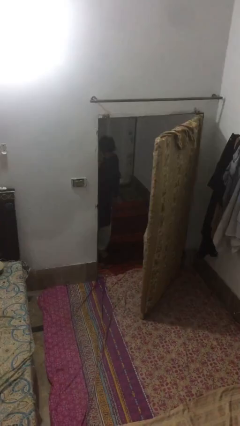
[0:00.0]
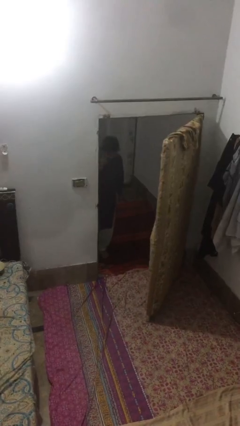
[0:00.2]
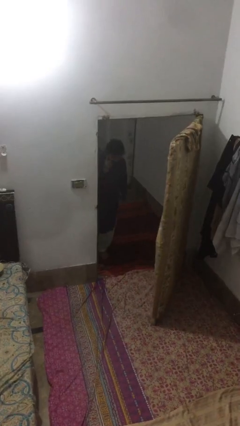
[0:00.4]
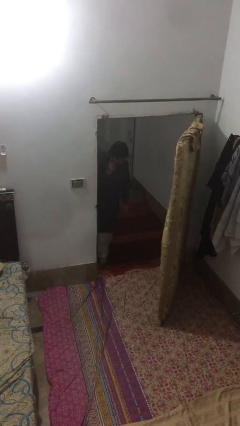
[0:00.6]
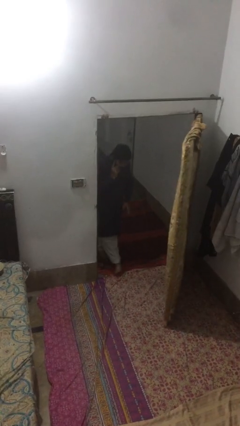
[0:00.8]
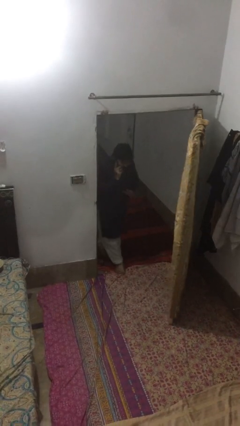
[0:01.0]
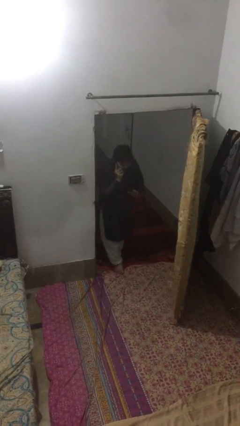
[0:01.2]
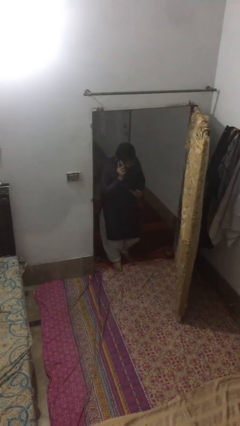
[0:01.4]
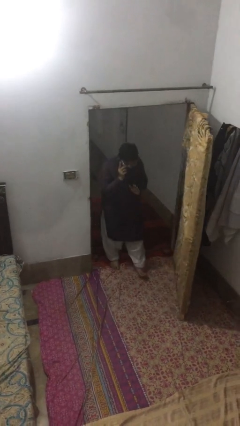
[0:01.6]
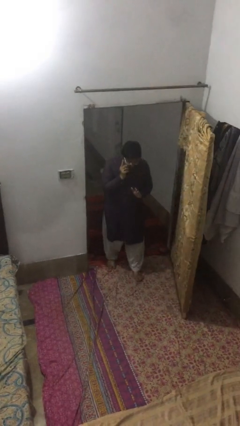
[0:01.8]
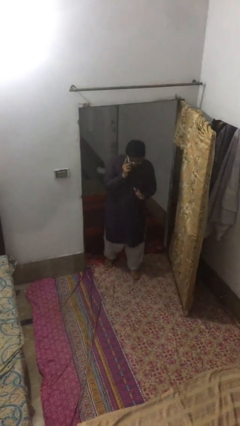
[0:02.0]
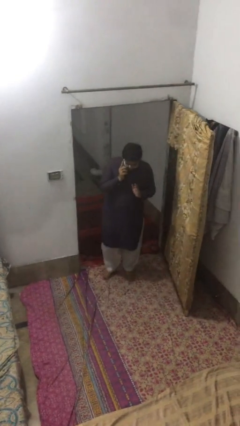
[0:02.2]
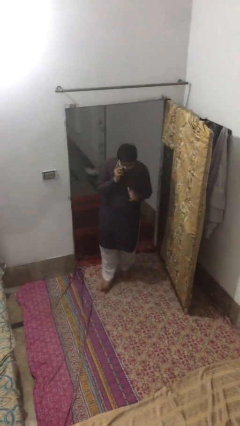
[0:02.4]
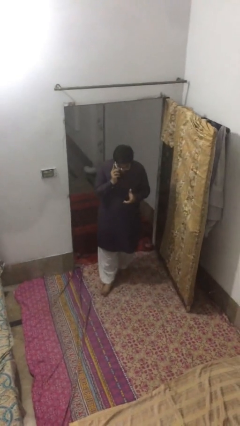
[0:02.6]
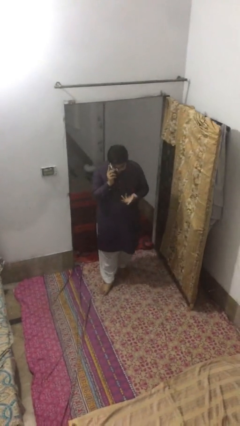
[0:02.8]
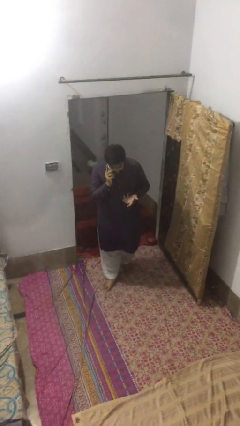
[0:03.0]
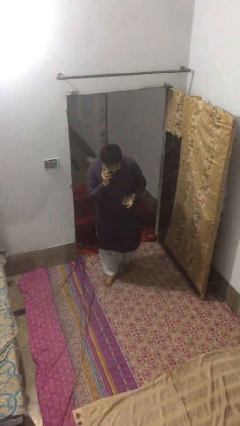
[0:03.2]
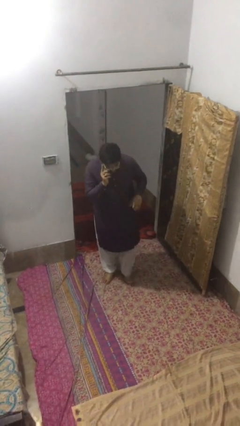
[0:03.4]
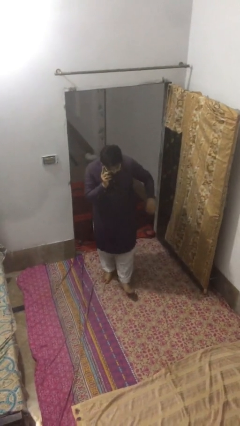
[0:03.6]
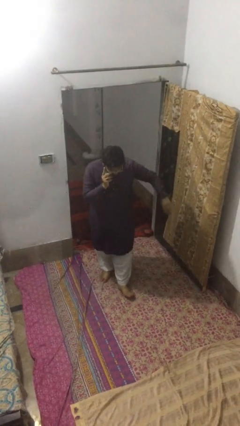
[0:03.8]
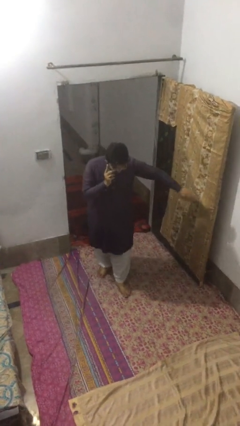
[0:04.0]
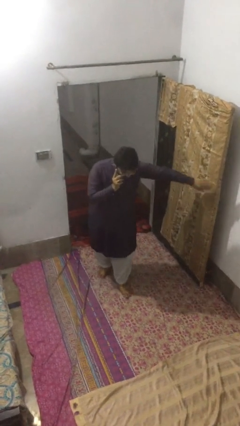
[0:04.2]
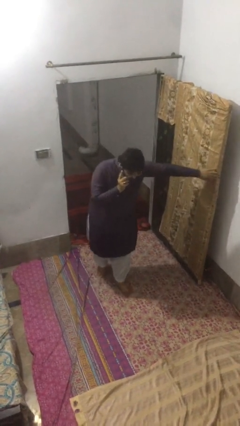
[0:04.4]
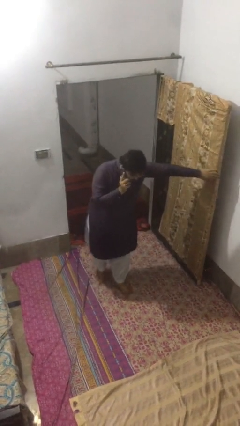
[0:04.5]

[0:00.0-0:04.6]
person enters scene through structure

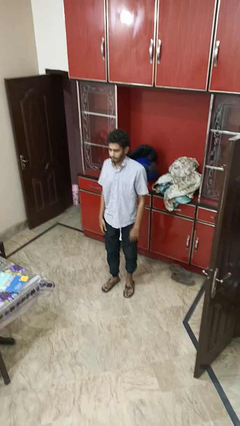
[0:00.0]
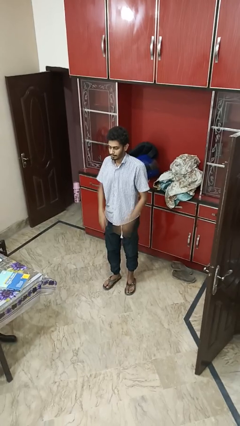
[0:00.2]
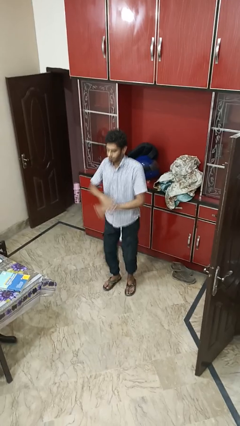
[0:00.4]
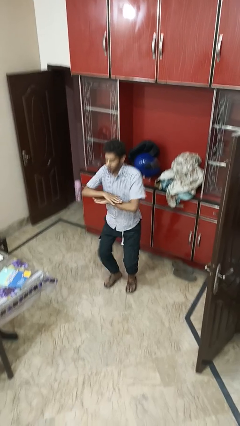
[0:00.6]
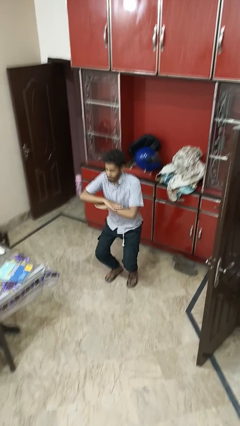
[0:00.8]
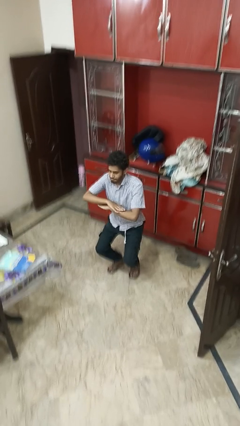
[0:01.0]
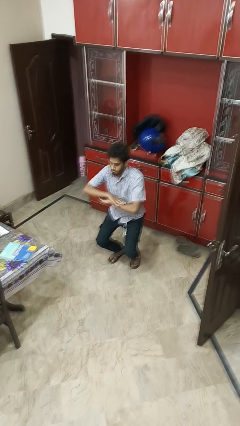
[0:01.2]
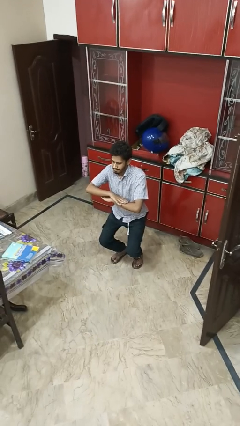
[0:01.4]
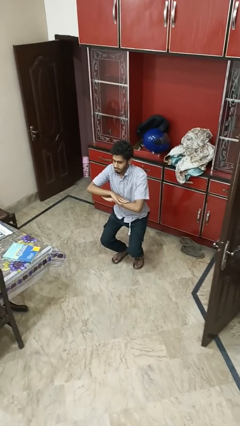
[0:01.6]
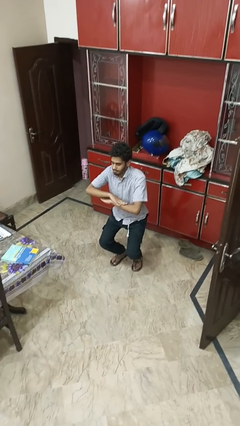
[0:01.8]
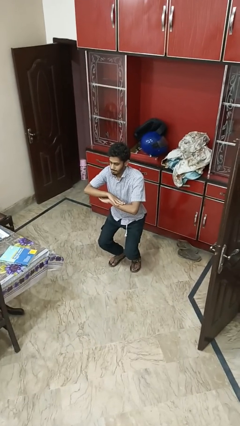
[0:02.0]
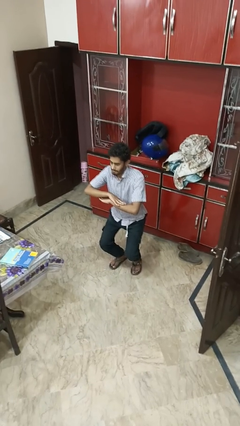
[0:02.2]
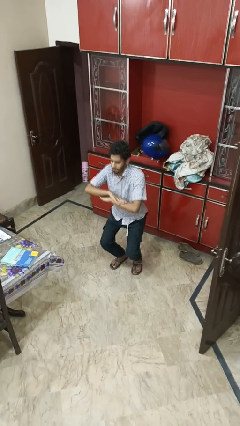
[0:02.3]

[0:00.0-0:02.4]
person squats

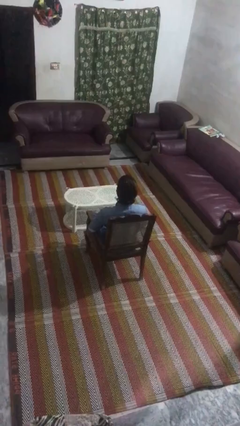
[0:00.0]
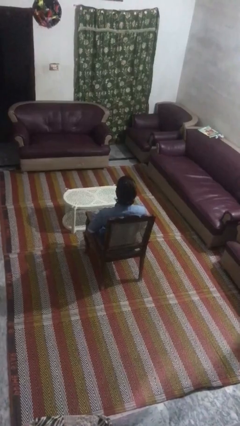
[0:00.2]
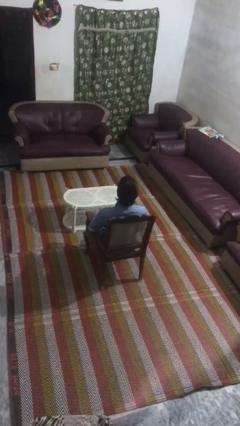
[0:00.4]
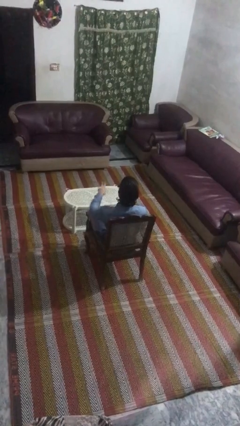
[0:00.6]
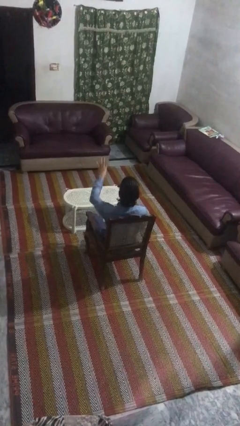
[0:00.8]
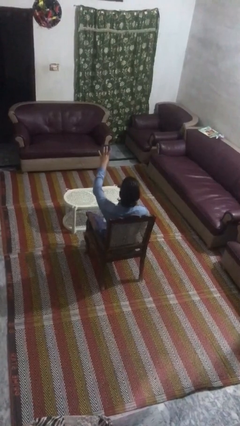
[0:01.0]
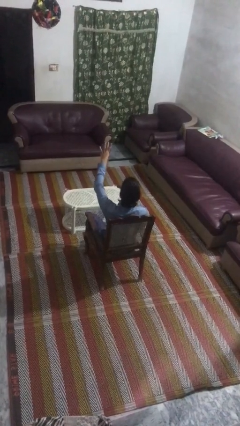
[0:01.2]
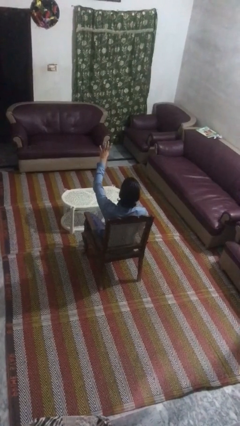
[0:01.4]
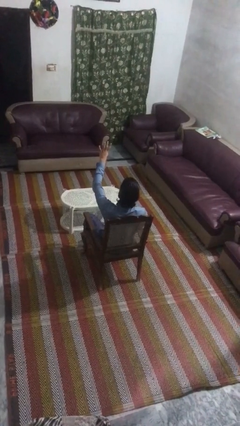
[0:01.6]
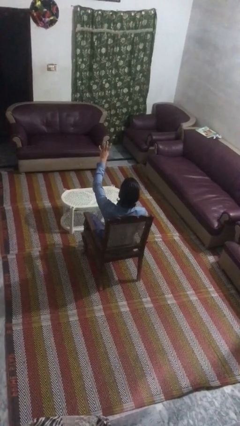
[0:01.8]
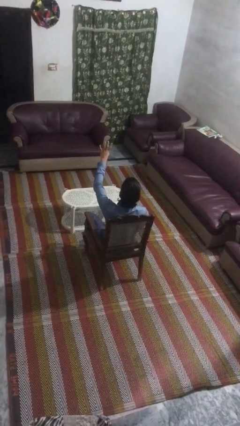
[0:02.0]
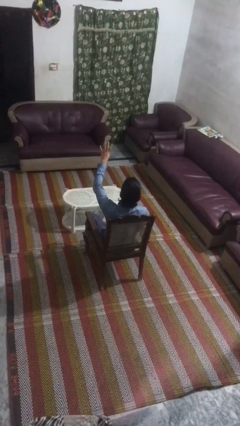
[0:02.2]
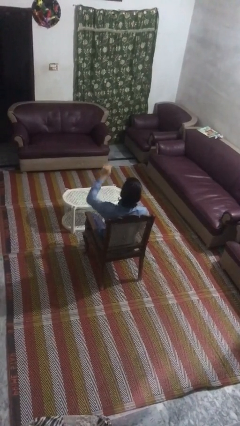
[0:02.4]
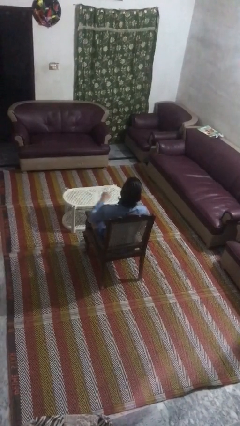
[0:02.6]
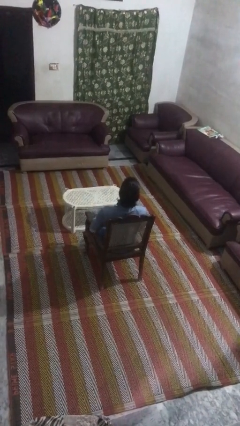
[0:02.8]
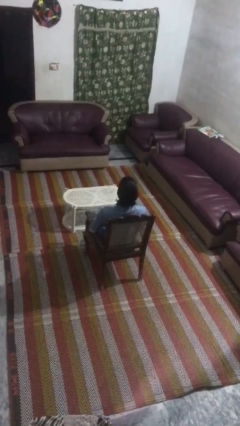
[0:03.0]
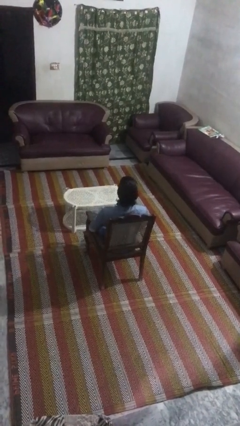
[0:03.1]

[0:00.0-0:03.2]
person gestures number four

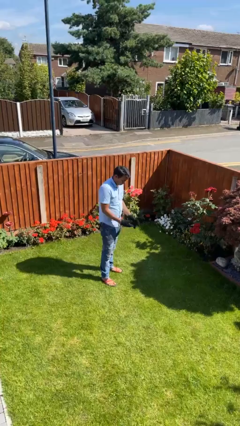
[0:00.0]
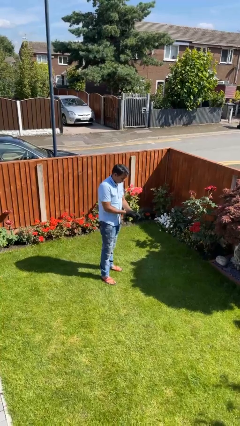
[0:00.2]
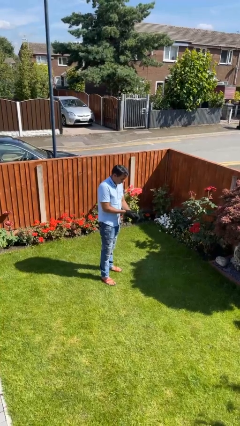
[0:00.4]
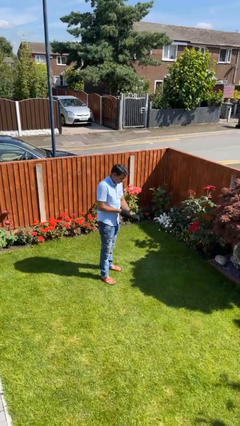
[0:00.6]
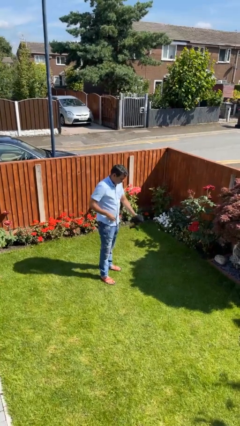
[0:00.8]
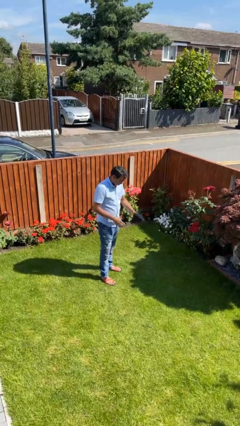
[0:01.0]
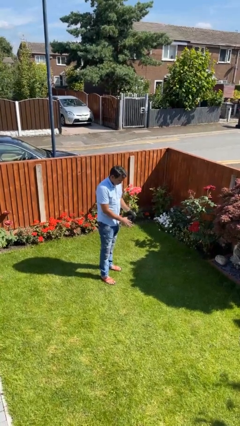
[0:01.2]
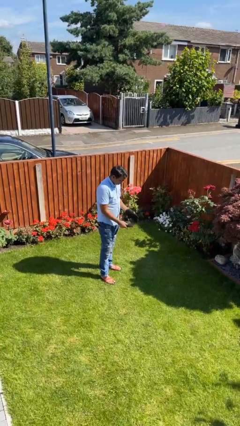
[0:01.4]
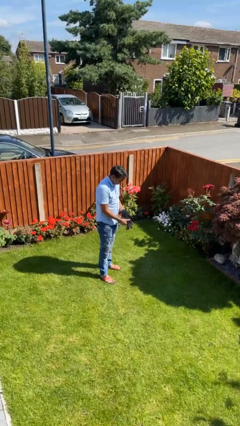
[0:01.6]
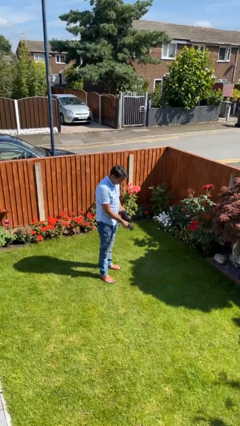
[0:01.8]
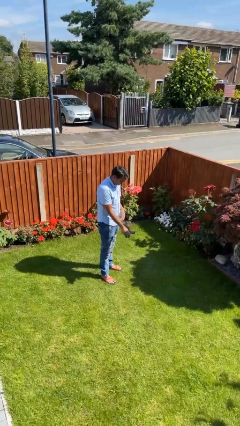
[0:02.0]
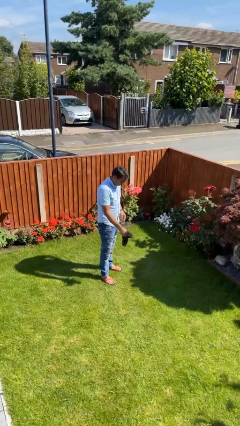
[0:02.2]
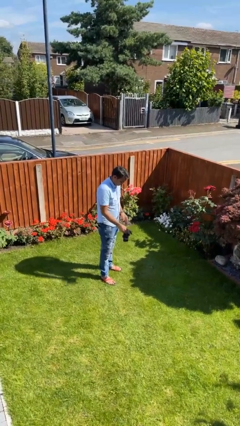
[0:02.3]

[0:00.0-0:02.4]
person takes off gloves

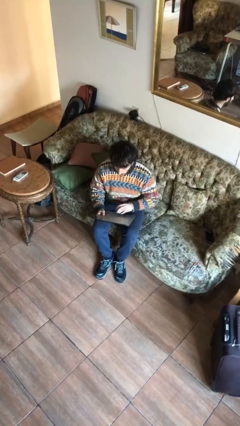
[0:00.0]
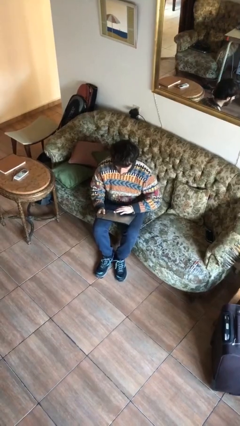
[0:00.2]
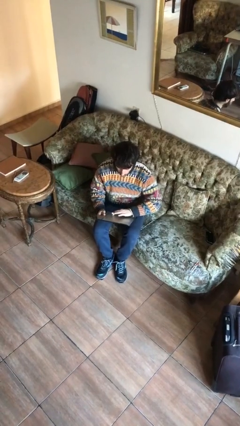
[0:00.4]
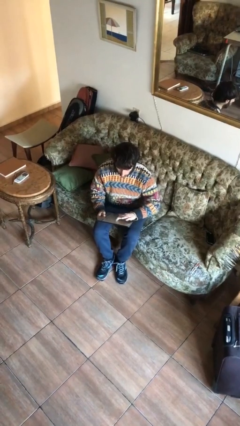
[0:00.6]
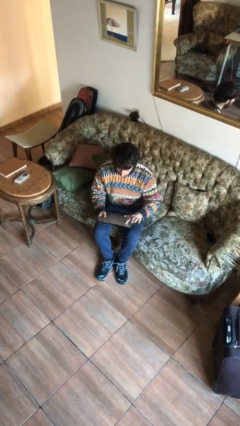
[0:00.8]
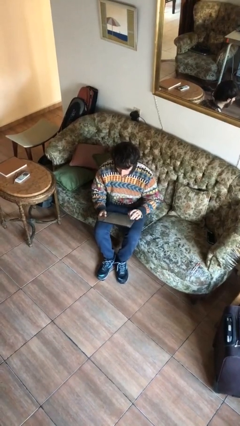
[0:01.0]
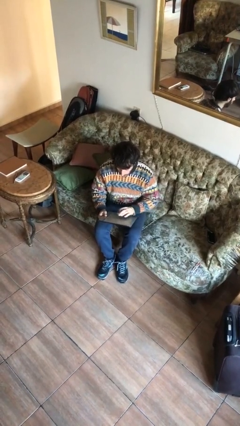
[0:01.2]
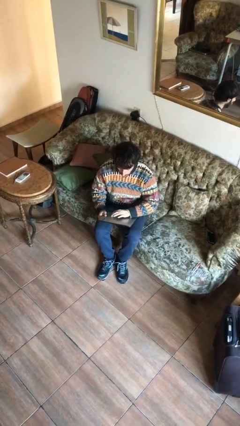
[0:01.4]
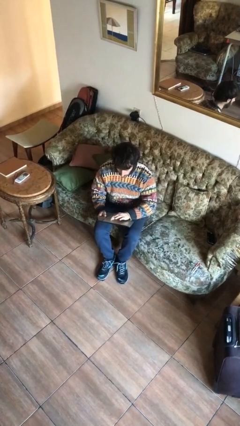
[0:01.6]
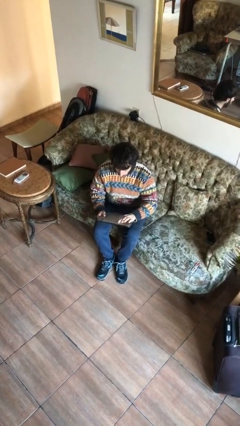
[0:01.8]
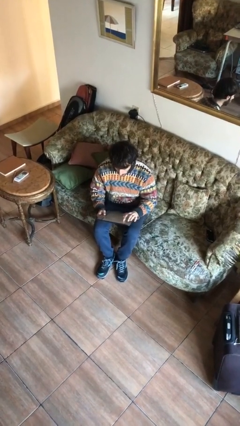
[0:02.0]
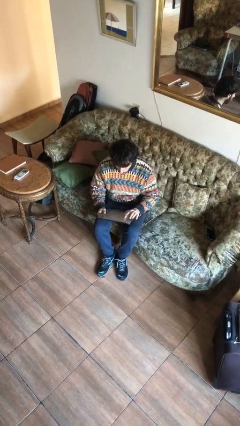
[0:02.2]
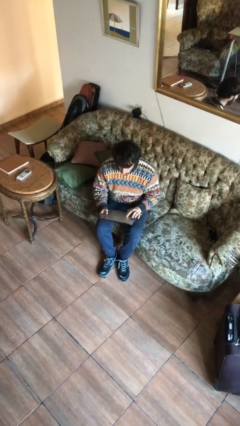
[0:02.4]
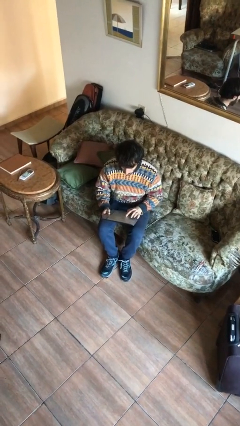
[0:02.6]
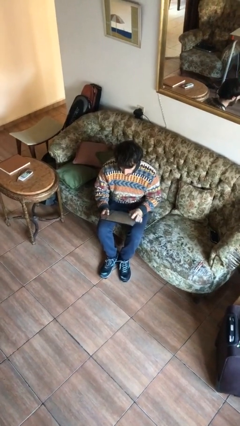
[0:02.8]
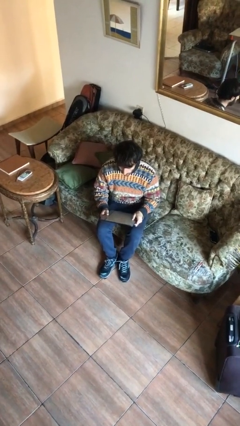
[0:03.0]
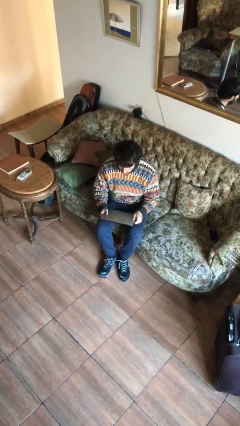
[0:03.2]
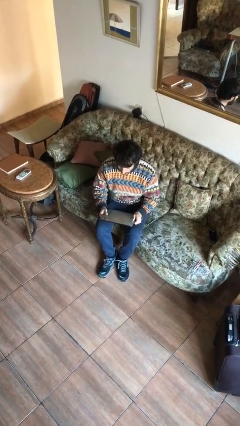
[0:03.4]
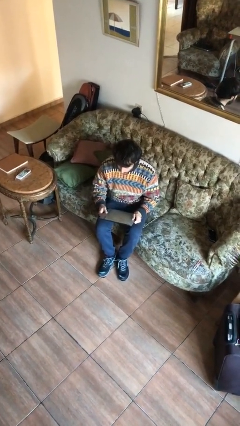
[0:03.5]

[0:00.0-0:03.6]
person interacts with tablet

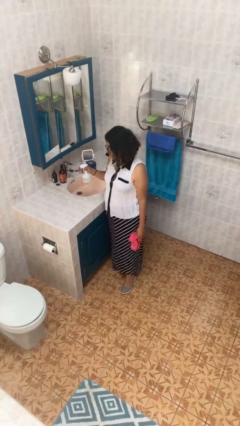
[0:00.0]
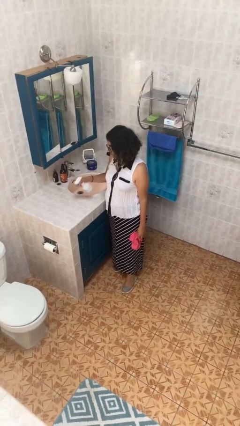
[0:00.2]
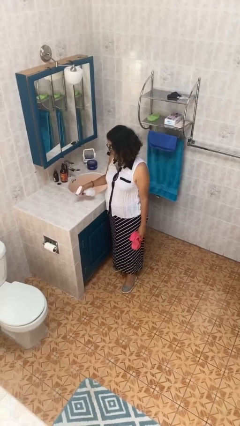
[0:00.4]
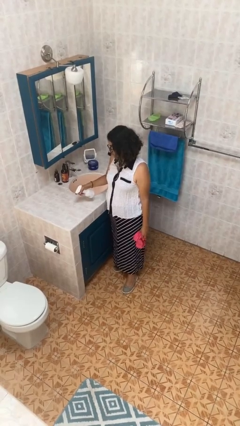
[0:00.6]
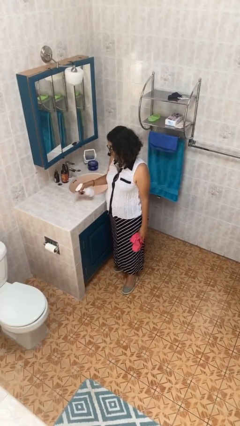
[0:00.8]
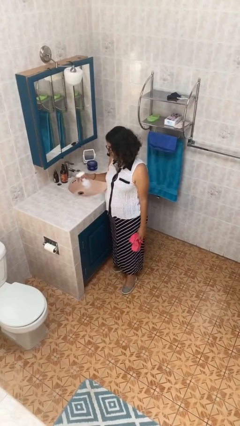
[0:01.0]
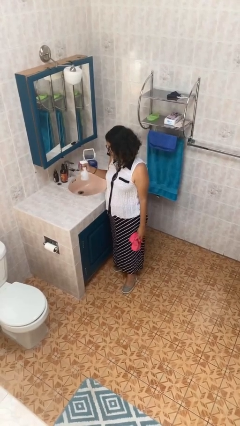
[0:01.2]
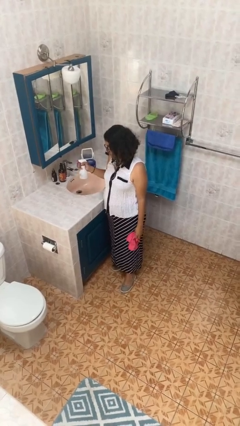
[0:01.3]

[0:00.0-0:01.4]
person sprays from bottle
